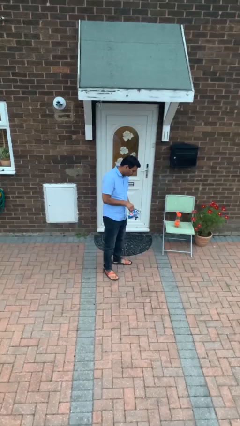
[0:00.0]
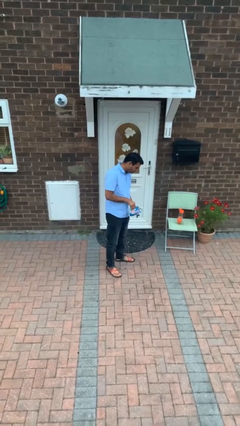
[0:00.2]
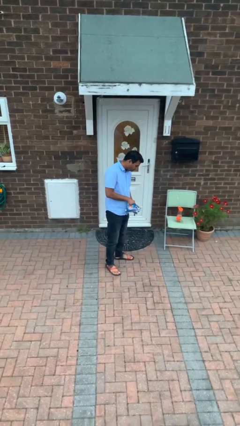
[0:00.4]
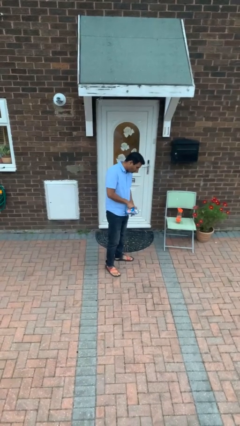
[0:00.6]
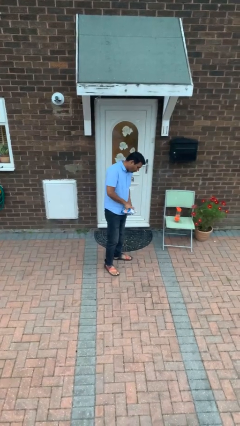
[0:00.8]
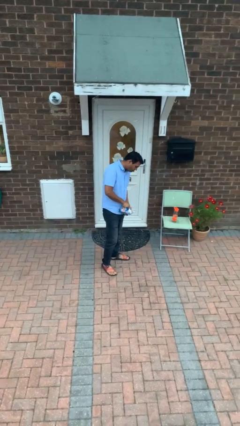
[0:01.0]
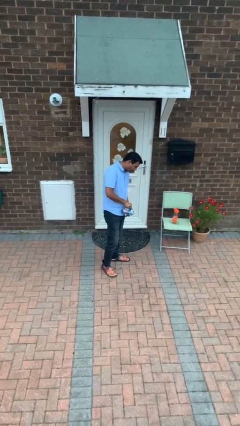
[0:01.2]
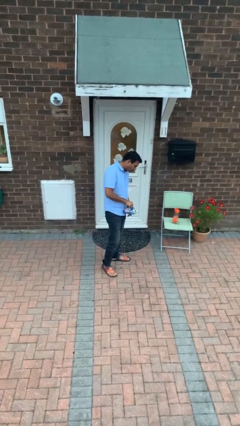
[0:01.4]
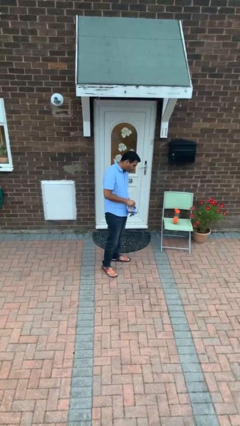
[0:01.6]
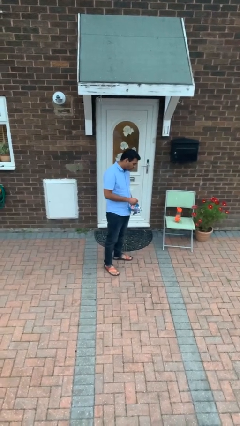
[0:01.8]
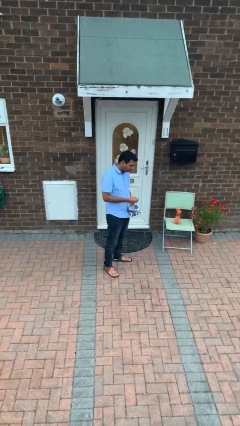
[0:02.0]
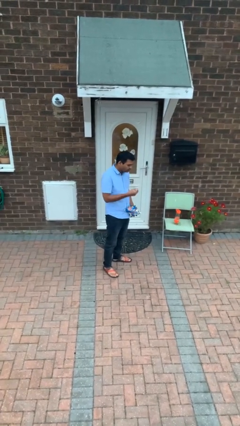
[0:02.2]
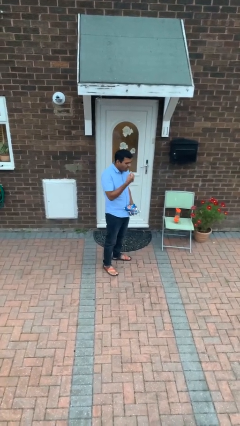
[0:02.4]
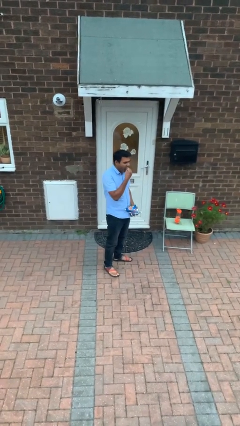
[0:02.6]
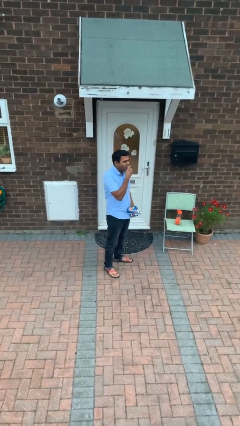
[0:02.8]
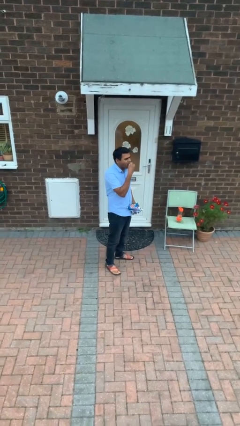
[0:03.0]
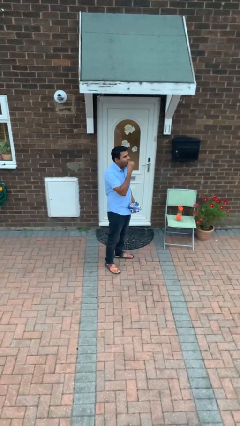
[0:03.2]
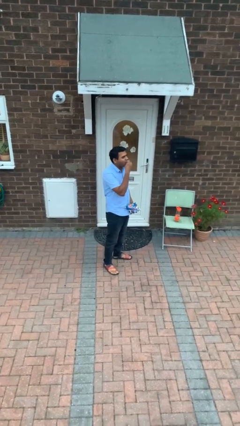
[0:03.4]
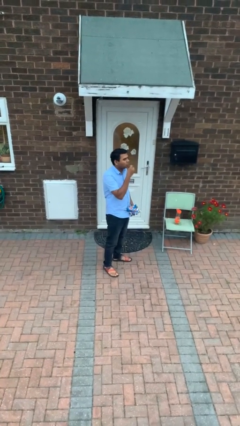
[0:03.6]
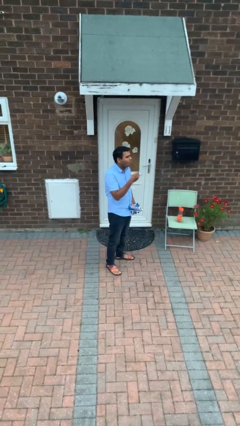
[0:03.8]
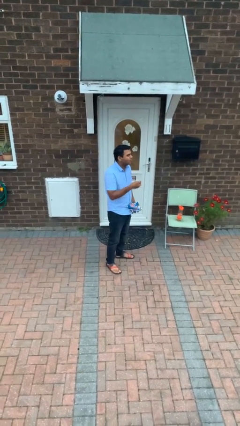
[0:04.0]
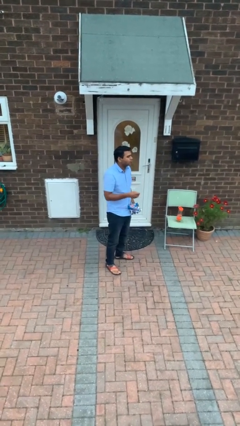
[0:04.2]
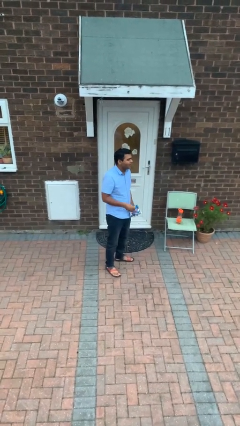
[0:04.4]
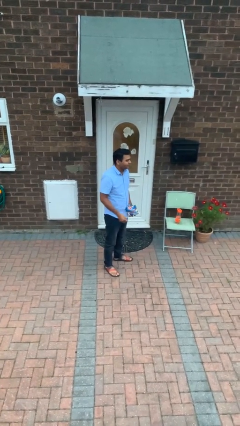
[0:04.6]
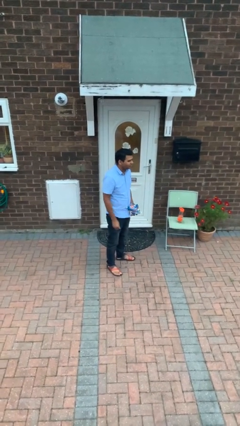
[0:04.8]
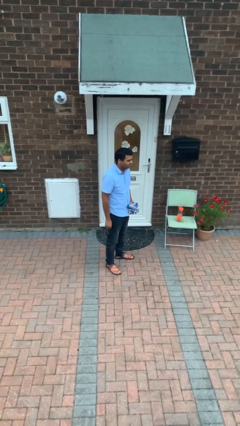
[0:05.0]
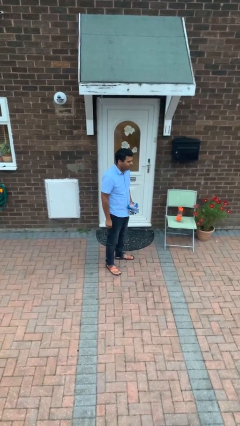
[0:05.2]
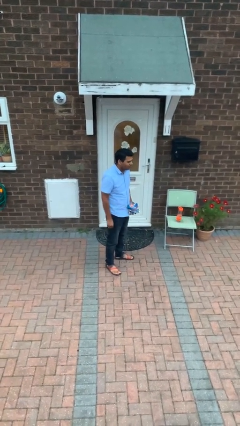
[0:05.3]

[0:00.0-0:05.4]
person eats snack from bag

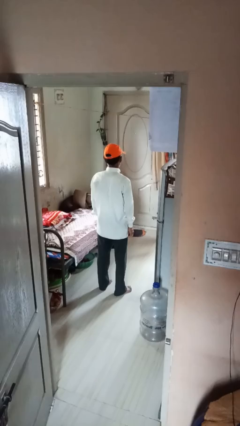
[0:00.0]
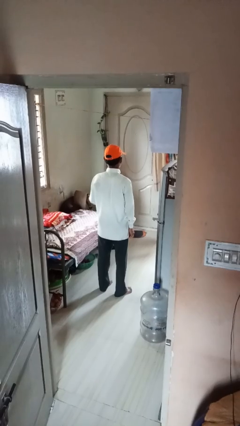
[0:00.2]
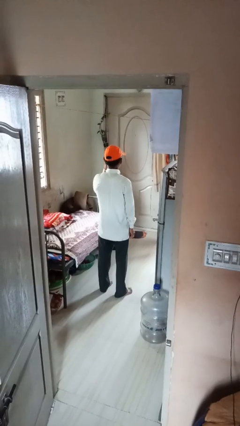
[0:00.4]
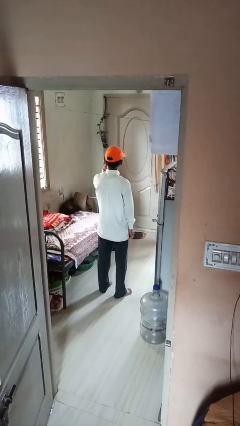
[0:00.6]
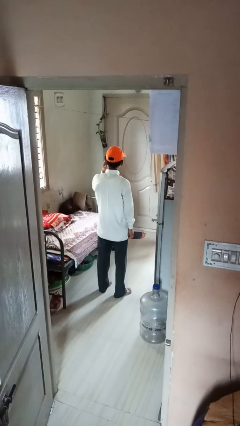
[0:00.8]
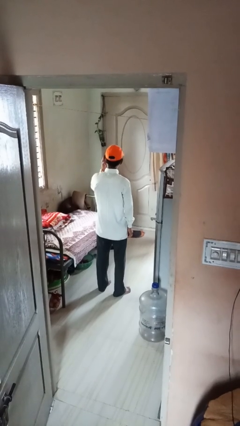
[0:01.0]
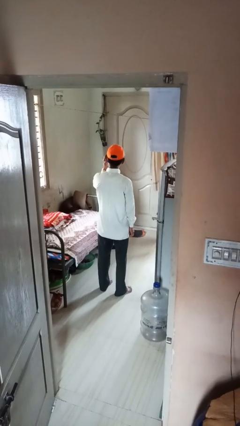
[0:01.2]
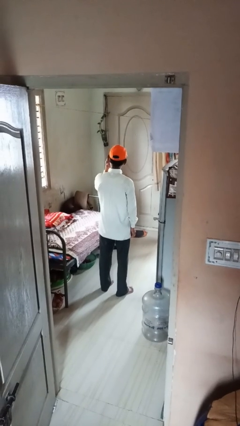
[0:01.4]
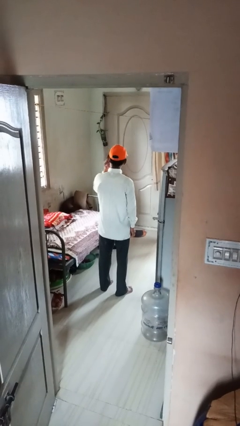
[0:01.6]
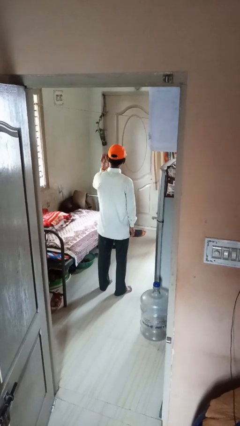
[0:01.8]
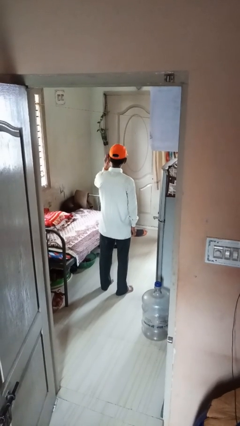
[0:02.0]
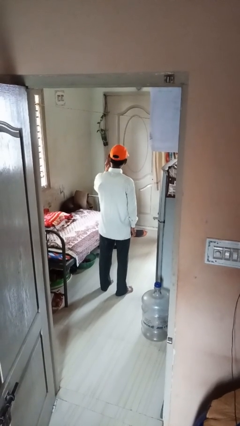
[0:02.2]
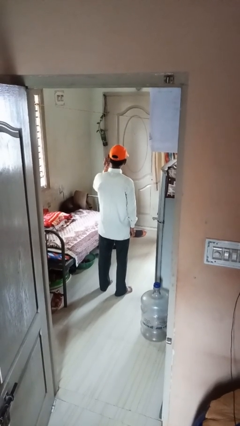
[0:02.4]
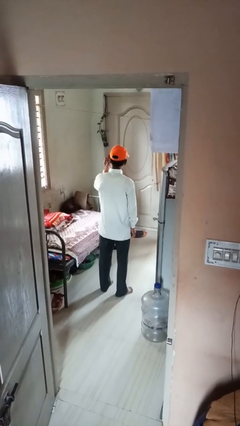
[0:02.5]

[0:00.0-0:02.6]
person scratches face

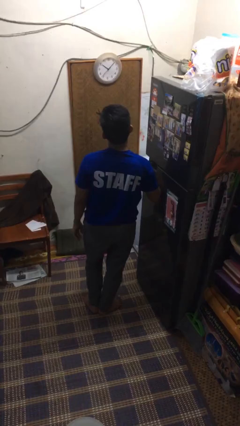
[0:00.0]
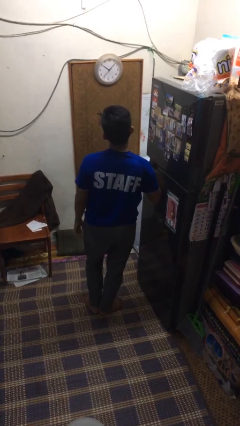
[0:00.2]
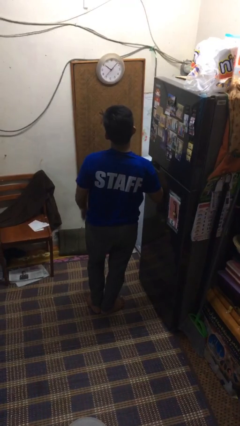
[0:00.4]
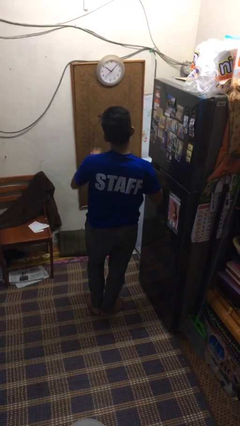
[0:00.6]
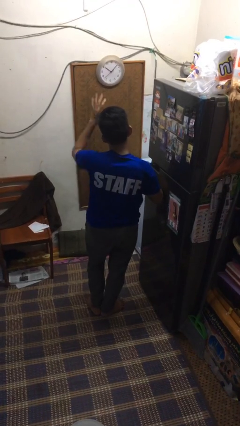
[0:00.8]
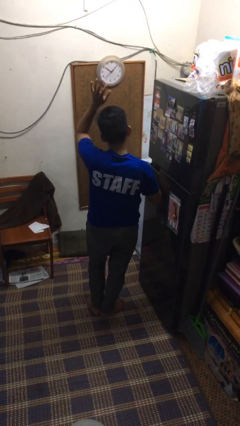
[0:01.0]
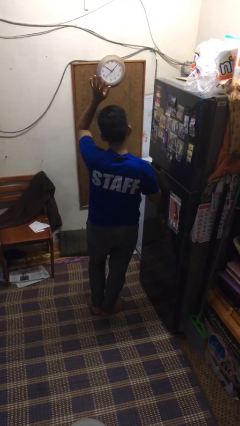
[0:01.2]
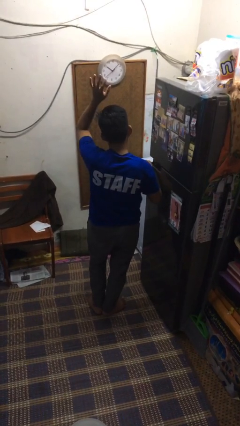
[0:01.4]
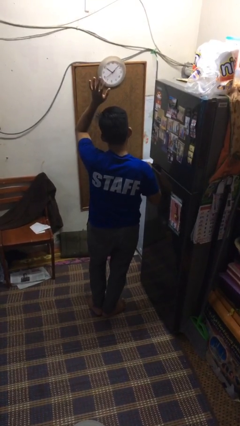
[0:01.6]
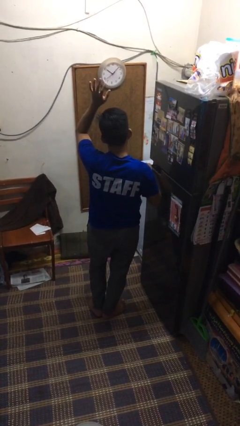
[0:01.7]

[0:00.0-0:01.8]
person gestures raise hand

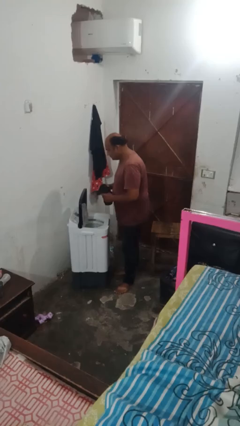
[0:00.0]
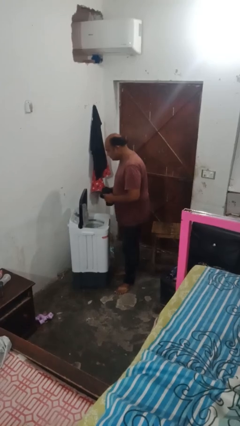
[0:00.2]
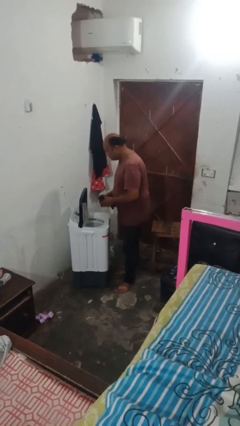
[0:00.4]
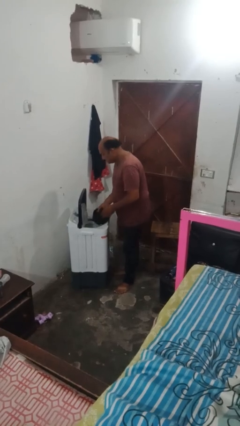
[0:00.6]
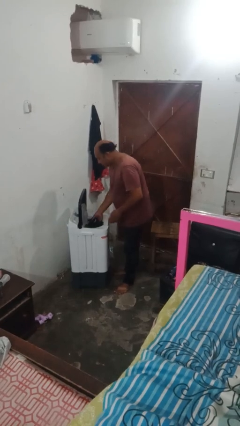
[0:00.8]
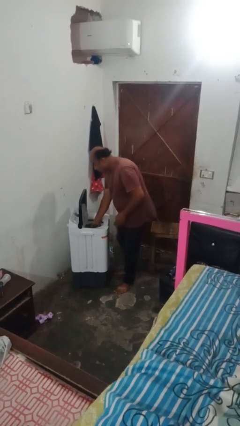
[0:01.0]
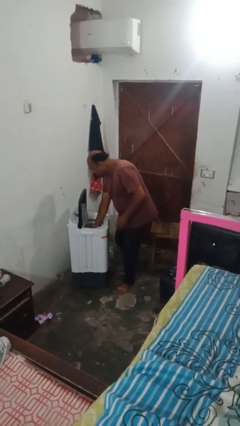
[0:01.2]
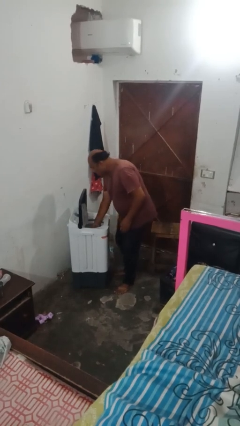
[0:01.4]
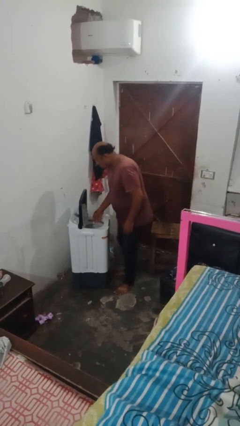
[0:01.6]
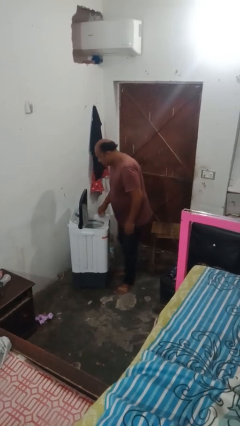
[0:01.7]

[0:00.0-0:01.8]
person loads clotheswasher

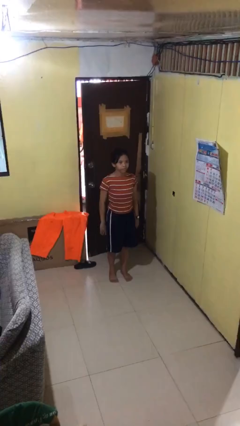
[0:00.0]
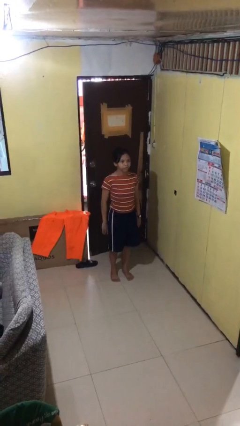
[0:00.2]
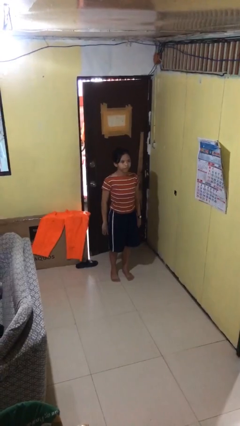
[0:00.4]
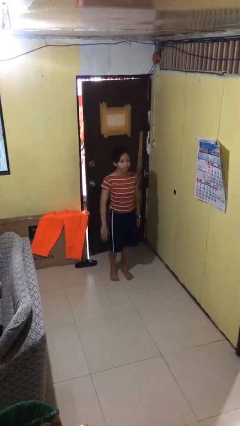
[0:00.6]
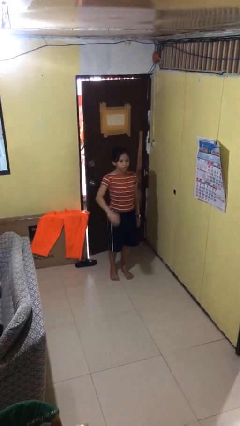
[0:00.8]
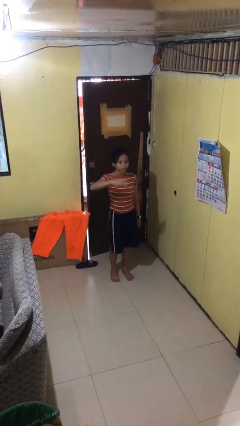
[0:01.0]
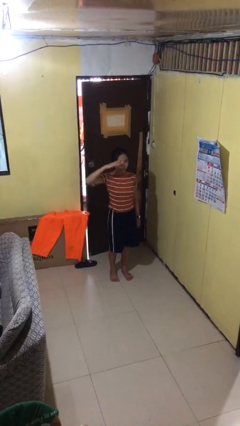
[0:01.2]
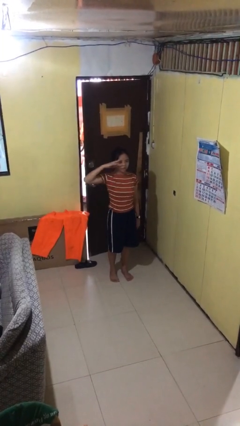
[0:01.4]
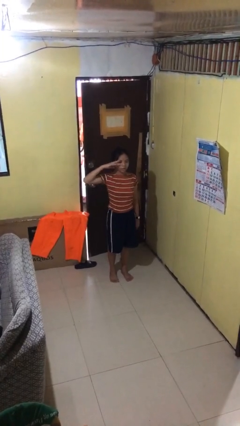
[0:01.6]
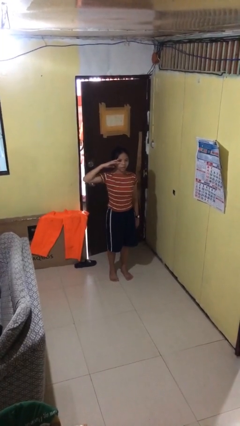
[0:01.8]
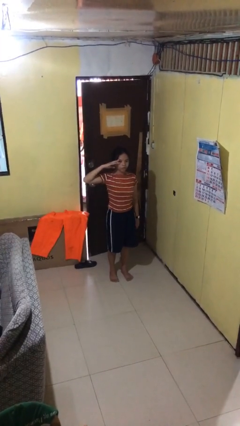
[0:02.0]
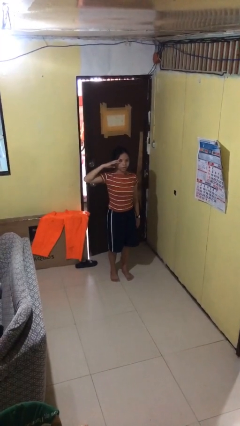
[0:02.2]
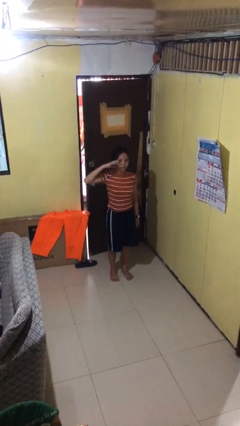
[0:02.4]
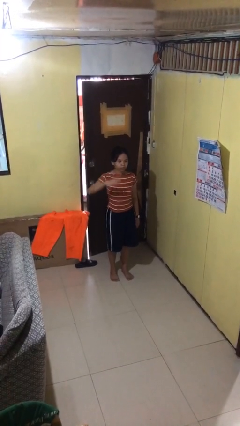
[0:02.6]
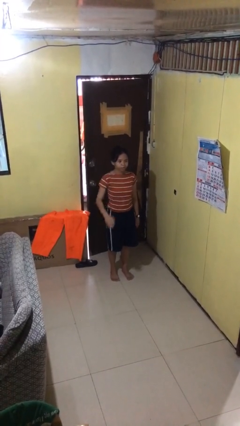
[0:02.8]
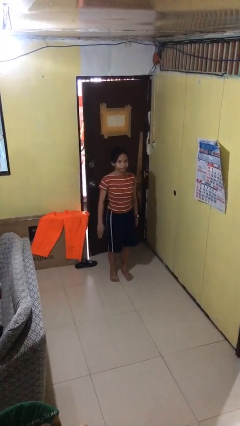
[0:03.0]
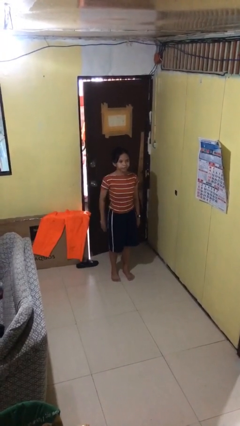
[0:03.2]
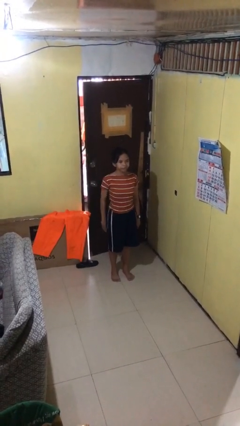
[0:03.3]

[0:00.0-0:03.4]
person salutes

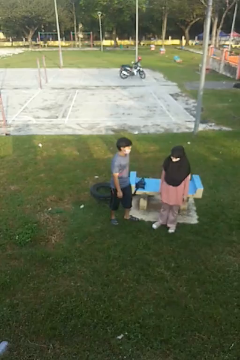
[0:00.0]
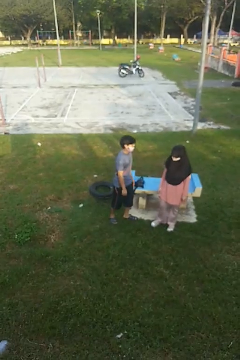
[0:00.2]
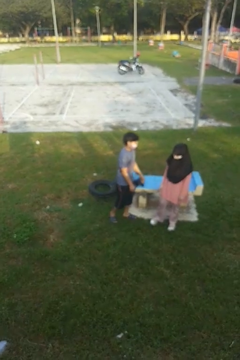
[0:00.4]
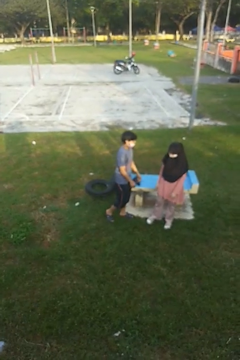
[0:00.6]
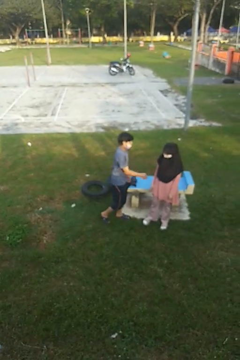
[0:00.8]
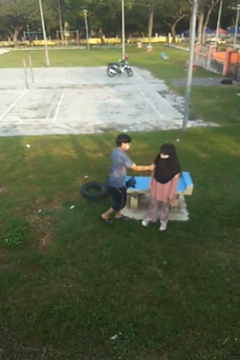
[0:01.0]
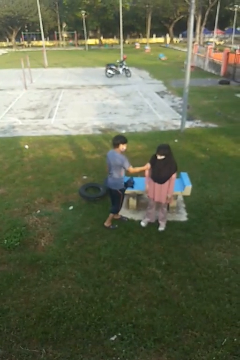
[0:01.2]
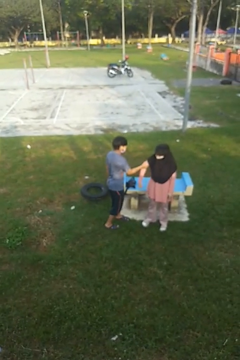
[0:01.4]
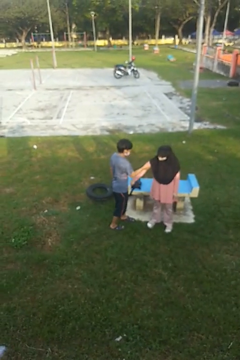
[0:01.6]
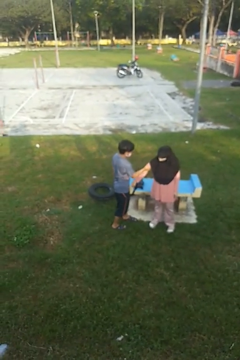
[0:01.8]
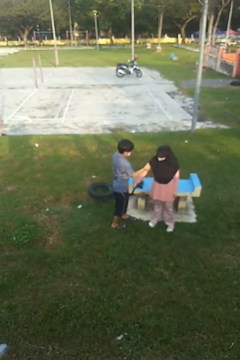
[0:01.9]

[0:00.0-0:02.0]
person grabs person by bicep

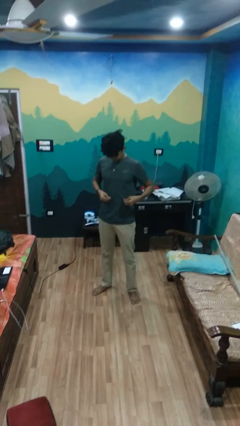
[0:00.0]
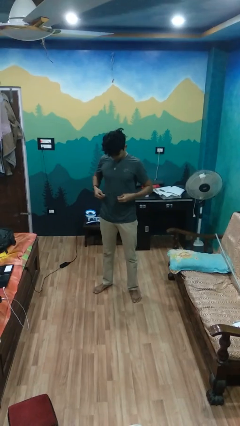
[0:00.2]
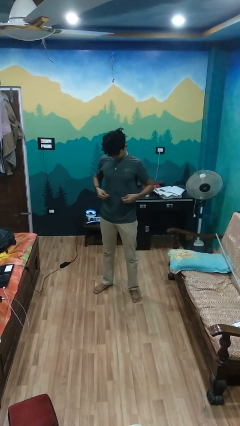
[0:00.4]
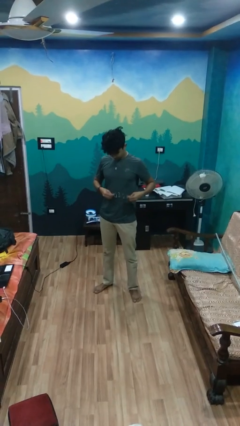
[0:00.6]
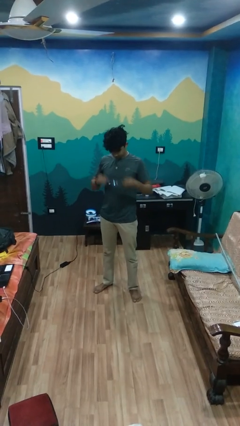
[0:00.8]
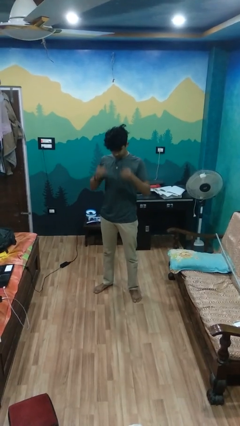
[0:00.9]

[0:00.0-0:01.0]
person cleans eyeglasses
